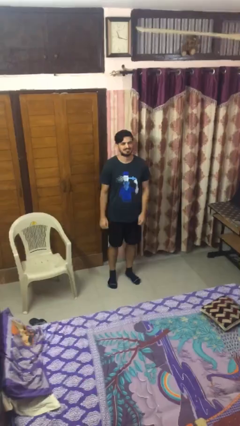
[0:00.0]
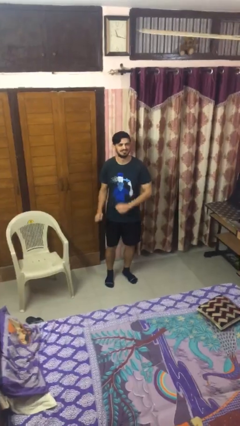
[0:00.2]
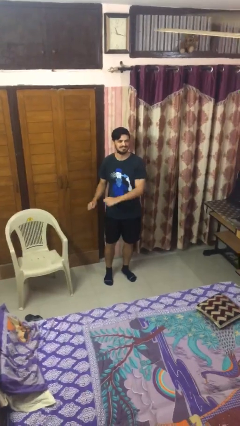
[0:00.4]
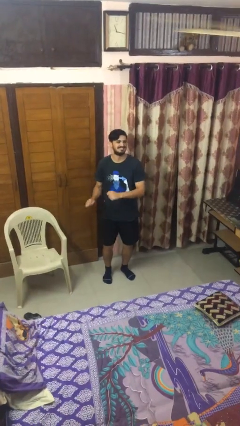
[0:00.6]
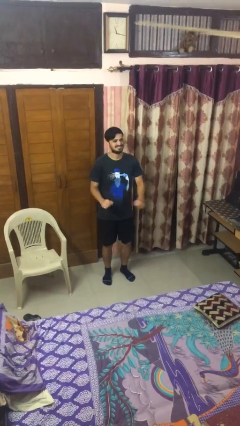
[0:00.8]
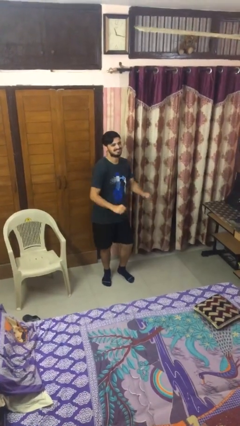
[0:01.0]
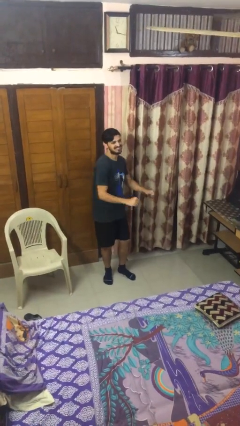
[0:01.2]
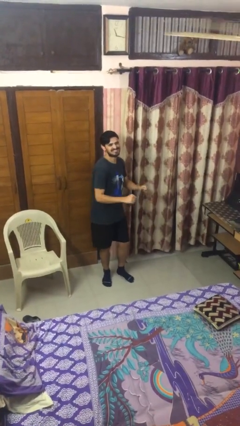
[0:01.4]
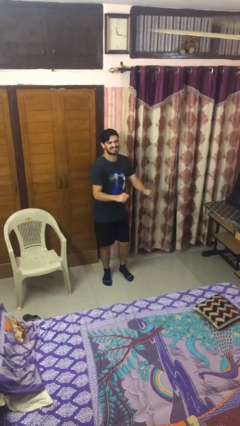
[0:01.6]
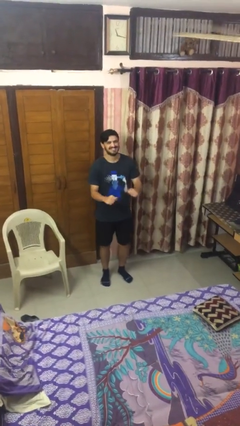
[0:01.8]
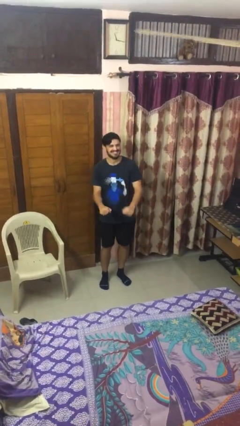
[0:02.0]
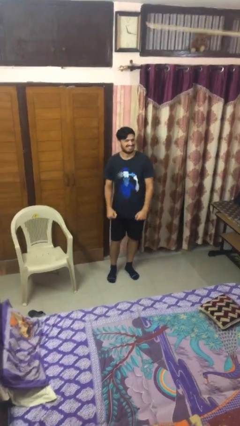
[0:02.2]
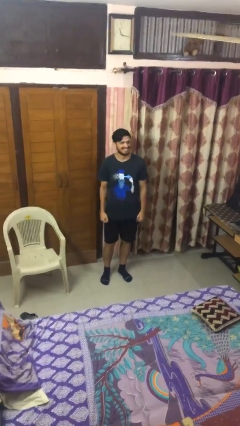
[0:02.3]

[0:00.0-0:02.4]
person dances in place

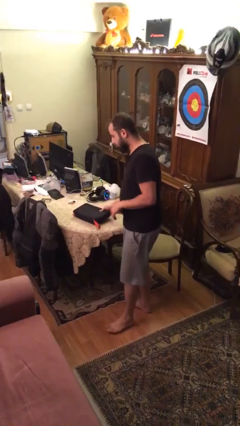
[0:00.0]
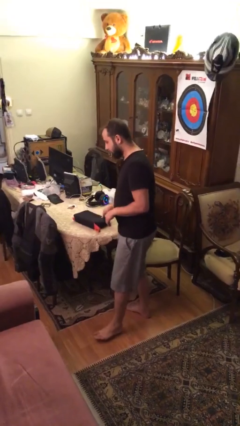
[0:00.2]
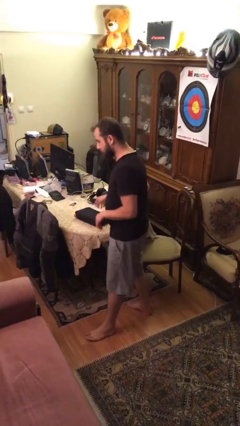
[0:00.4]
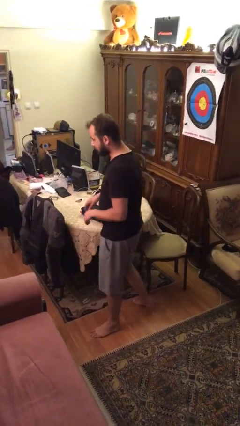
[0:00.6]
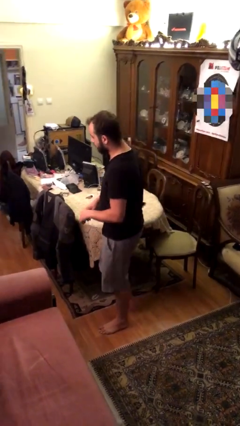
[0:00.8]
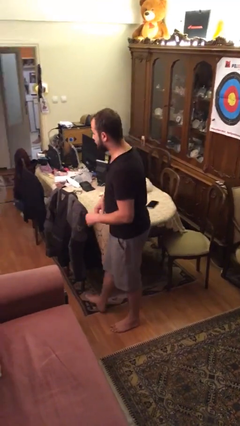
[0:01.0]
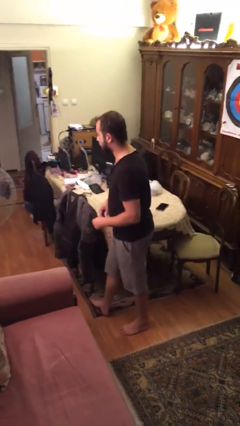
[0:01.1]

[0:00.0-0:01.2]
person puts down object on table

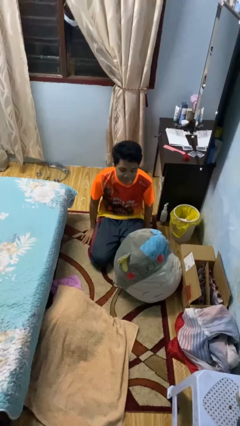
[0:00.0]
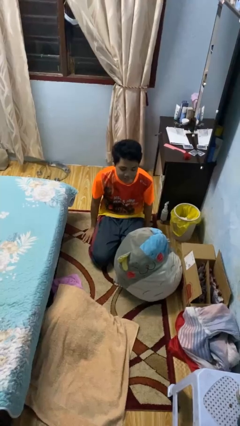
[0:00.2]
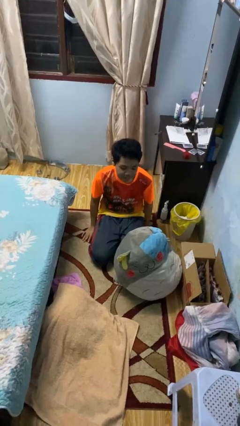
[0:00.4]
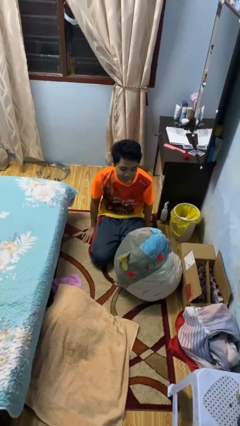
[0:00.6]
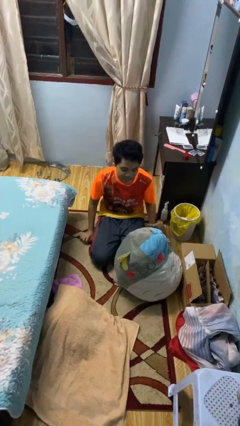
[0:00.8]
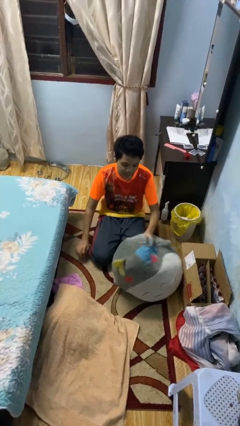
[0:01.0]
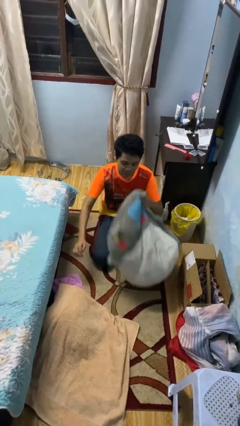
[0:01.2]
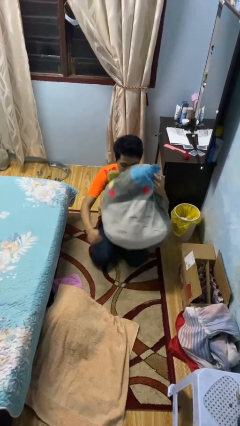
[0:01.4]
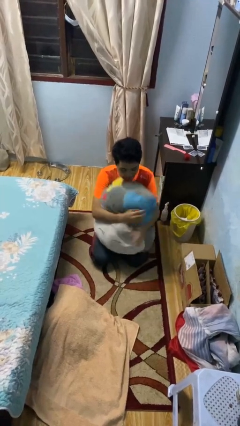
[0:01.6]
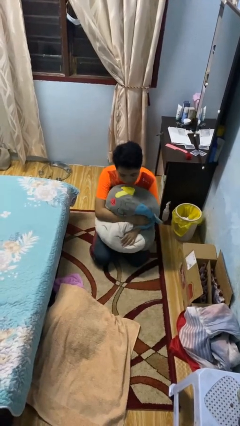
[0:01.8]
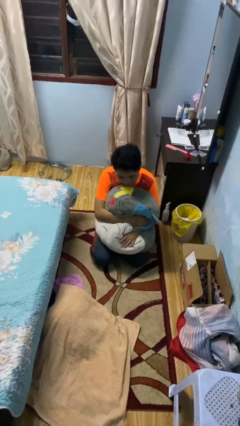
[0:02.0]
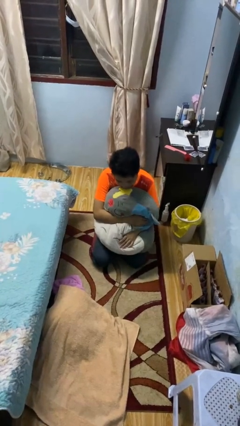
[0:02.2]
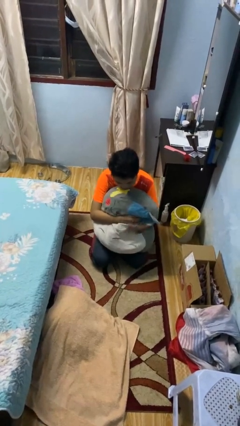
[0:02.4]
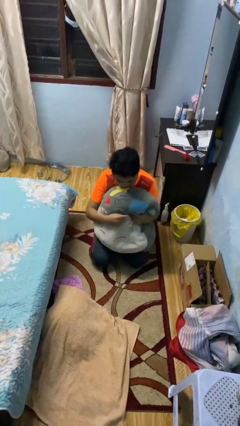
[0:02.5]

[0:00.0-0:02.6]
person hugs stuffed animal

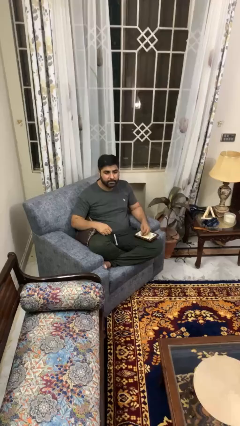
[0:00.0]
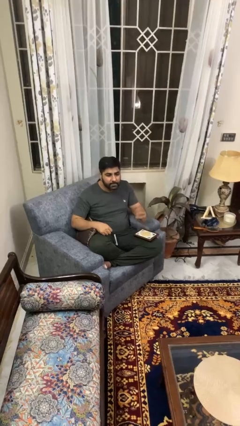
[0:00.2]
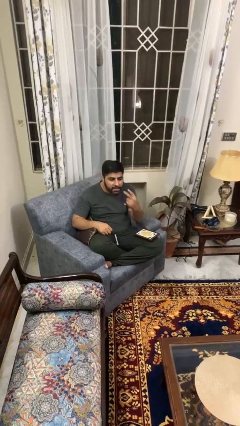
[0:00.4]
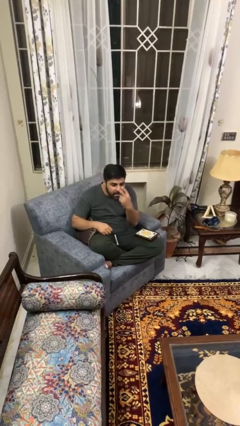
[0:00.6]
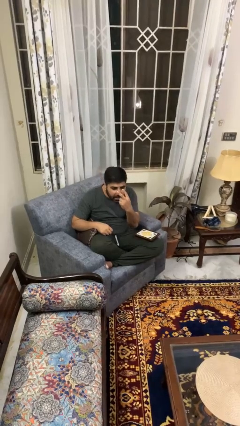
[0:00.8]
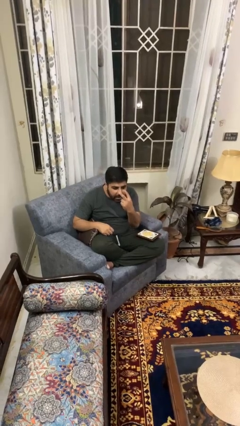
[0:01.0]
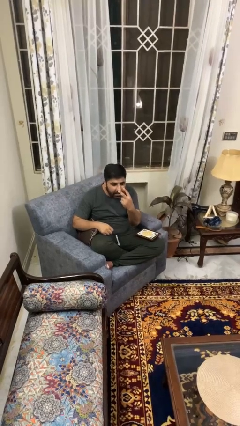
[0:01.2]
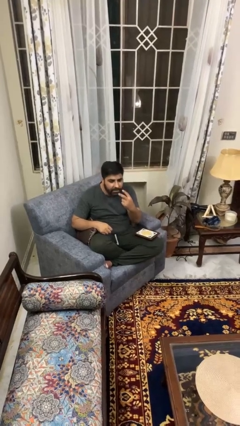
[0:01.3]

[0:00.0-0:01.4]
person gestures watch closely

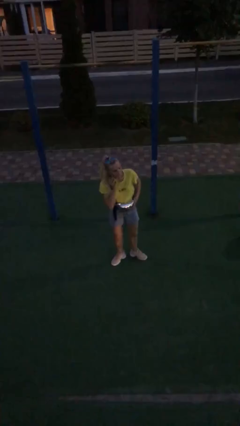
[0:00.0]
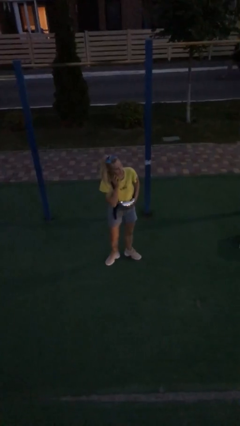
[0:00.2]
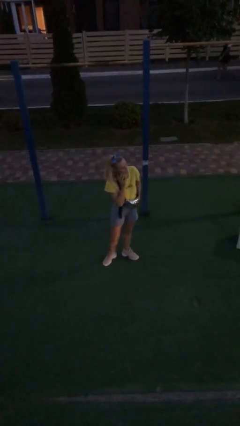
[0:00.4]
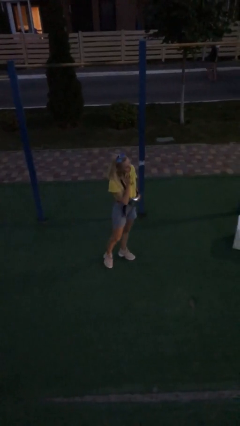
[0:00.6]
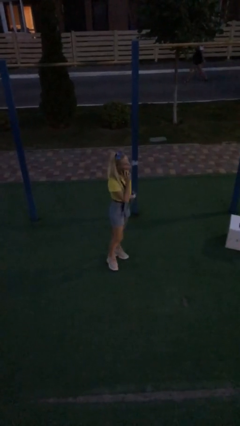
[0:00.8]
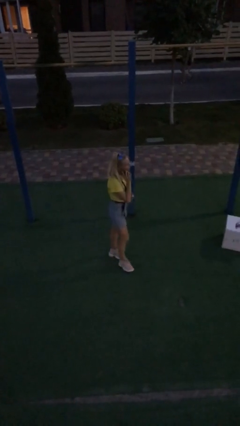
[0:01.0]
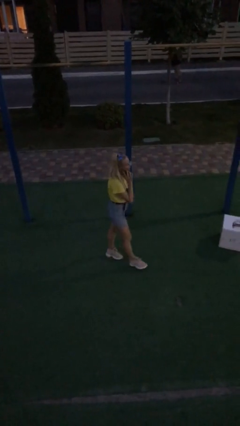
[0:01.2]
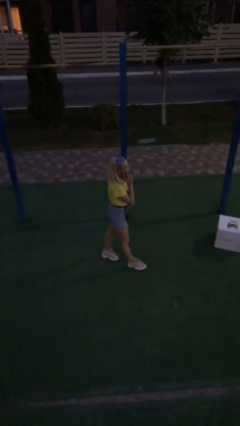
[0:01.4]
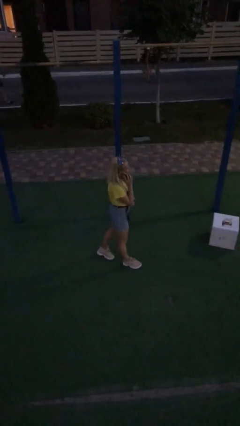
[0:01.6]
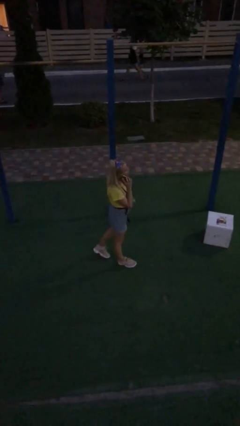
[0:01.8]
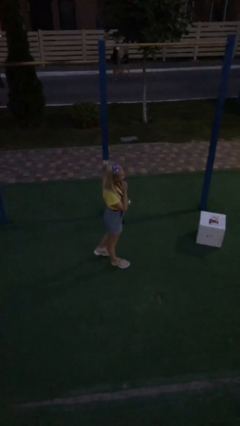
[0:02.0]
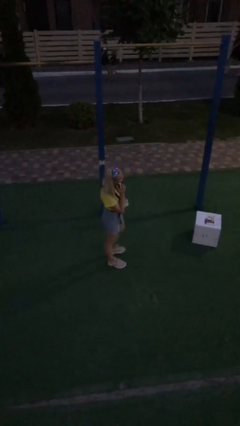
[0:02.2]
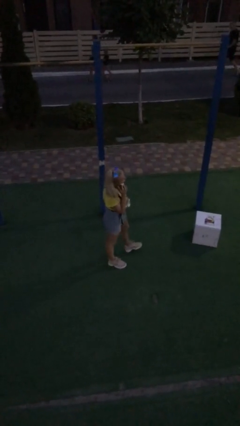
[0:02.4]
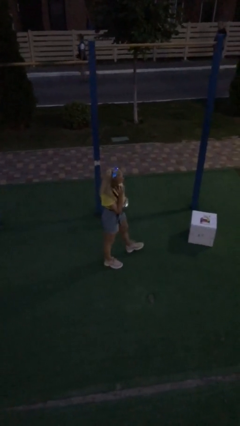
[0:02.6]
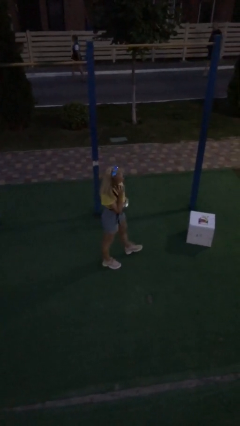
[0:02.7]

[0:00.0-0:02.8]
person talks on phone

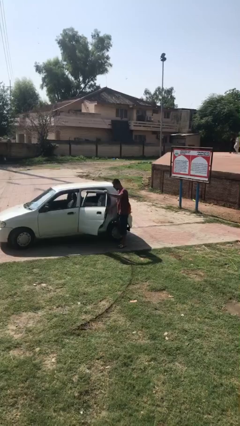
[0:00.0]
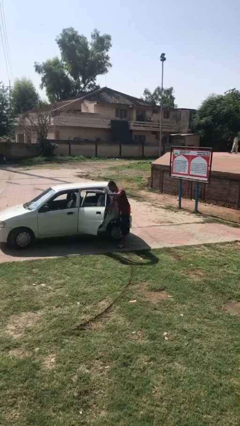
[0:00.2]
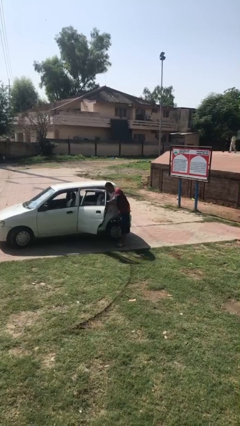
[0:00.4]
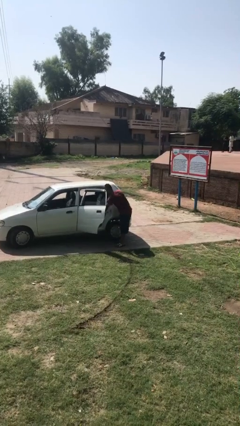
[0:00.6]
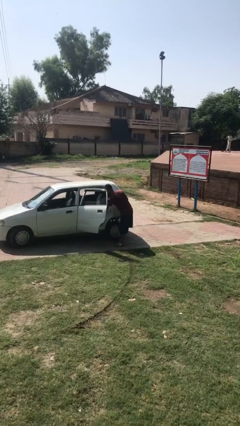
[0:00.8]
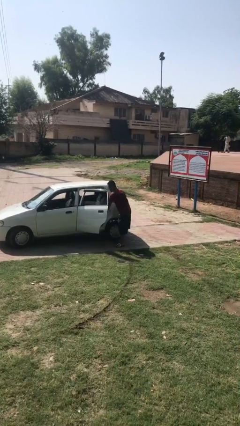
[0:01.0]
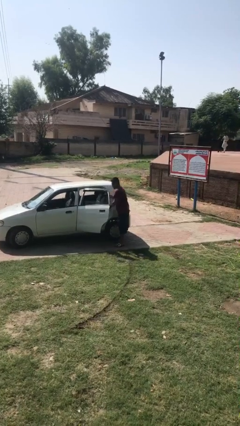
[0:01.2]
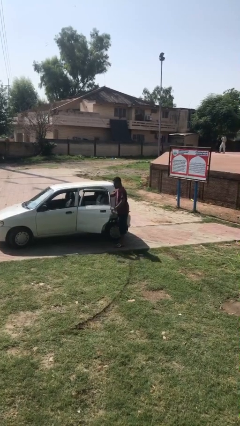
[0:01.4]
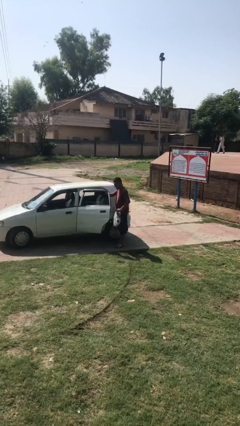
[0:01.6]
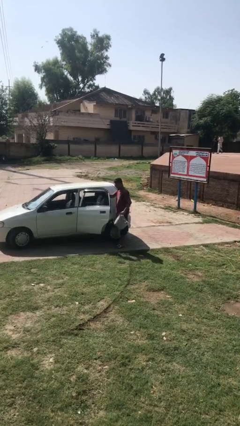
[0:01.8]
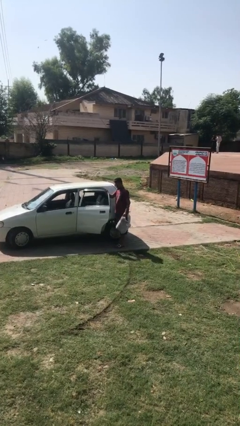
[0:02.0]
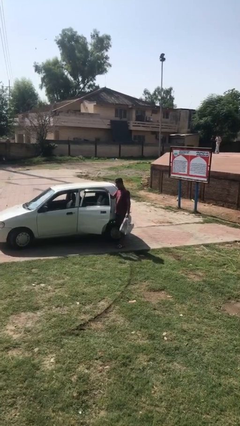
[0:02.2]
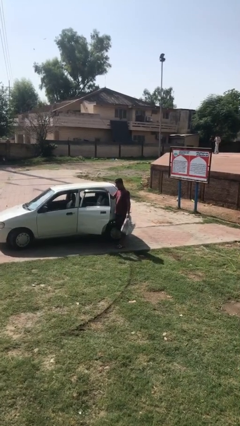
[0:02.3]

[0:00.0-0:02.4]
person unloads car

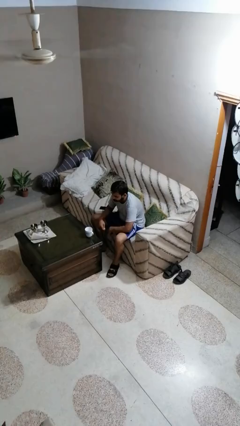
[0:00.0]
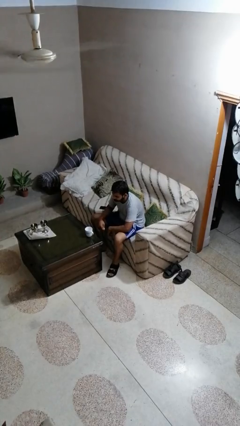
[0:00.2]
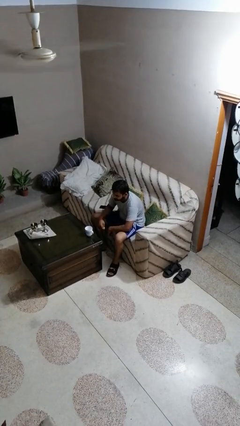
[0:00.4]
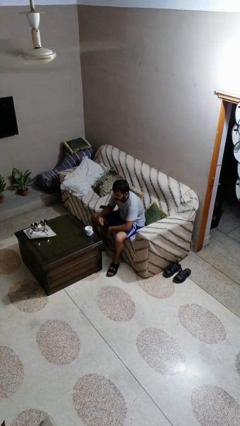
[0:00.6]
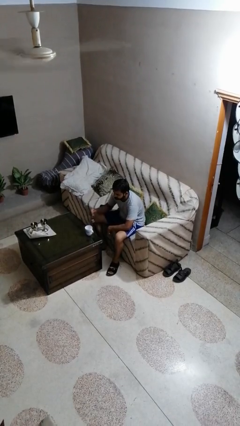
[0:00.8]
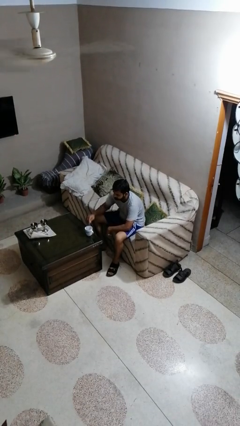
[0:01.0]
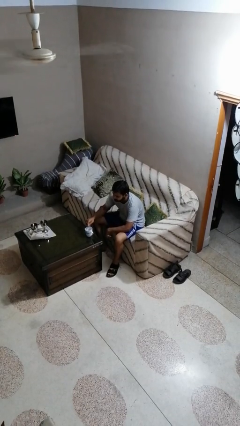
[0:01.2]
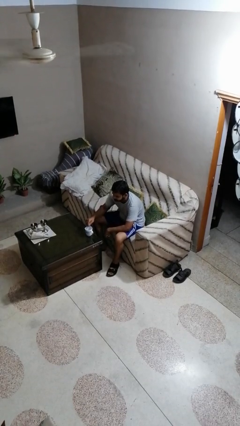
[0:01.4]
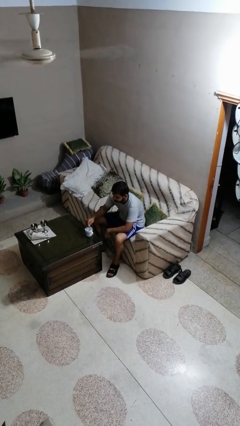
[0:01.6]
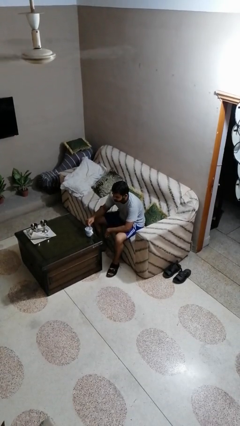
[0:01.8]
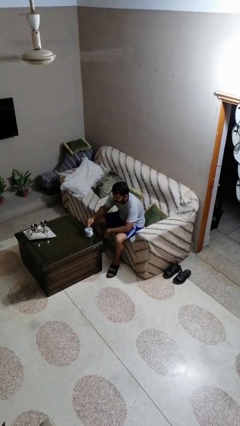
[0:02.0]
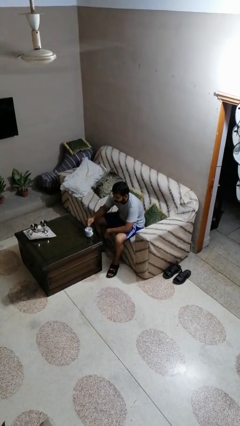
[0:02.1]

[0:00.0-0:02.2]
person stirs mug

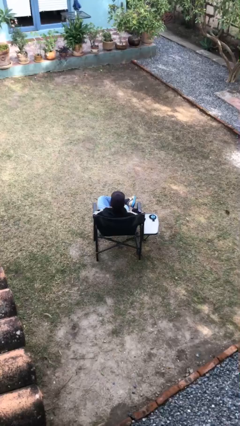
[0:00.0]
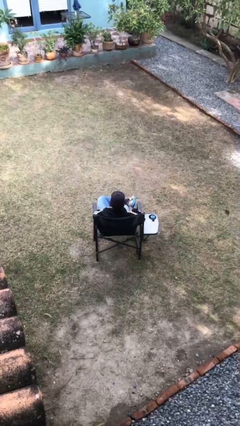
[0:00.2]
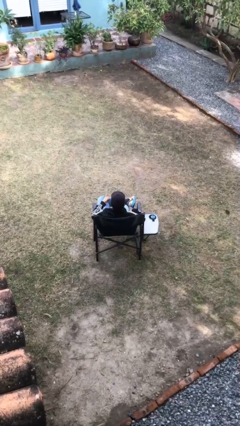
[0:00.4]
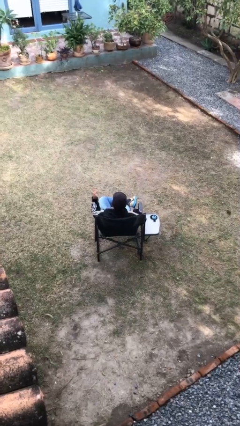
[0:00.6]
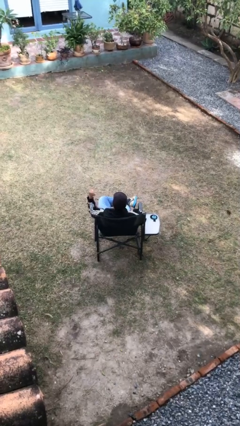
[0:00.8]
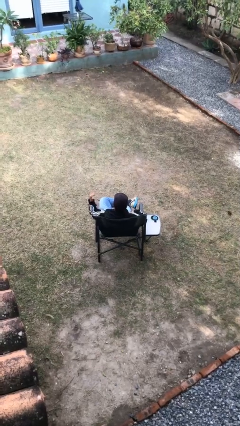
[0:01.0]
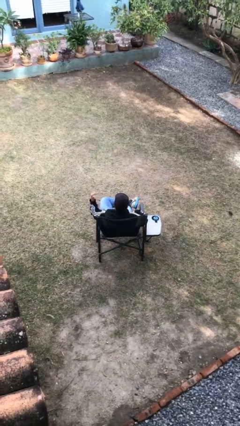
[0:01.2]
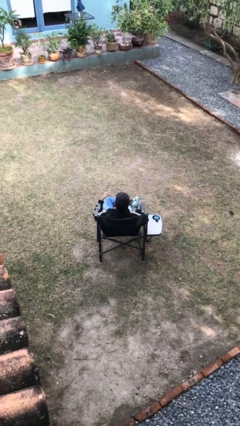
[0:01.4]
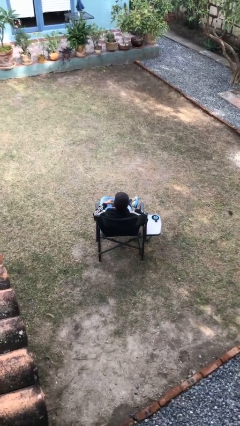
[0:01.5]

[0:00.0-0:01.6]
person gestures hang loose

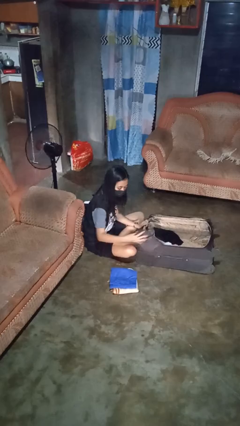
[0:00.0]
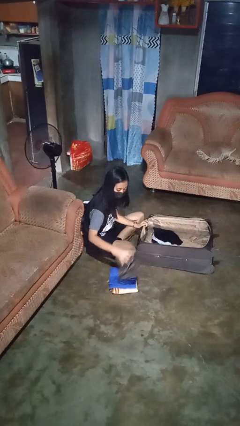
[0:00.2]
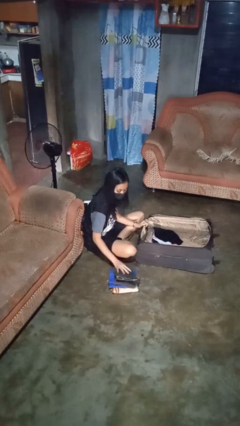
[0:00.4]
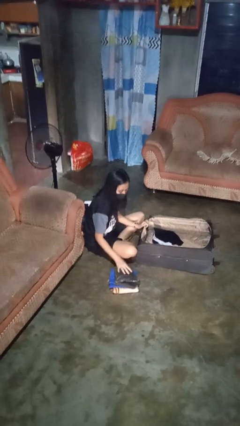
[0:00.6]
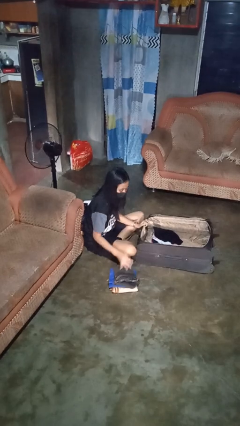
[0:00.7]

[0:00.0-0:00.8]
person unloads clothes from suitcase
